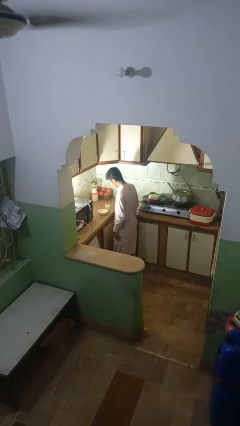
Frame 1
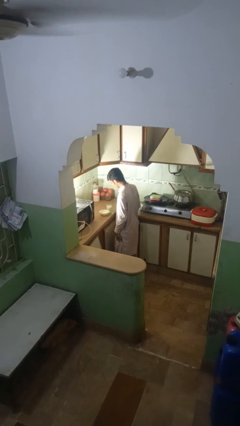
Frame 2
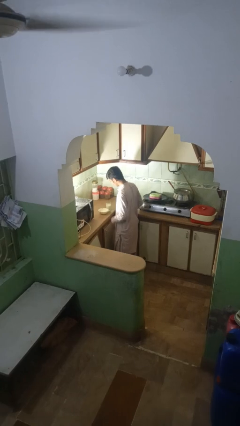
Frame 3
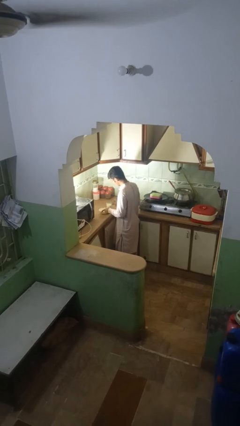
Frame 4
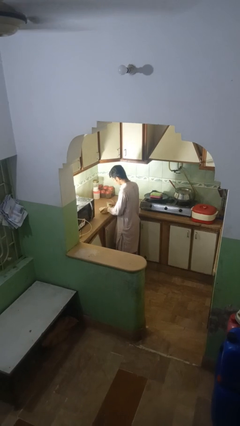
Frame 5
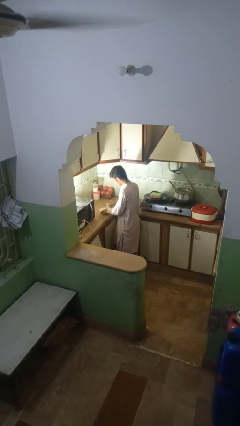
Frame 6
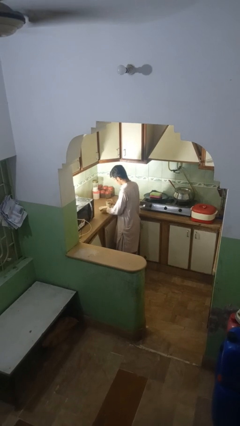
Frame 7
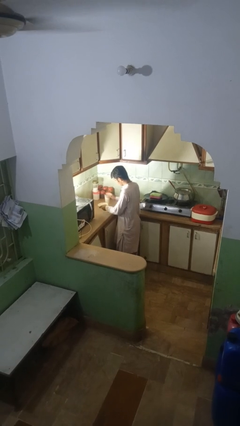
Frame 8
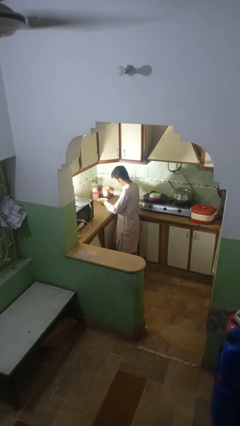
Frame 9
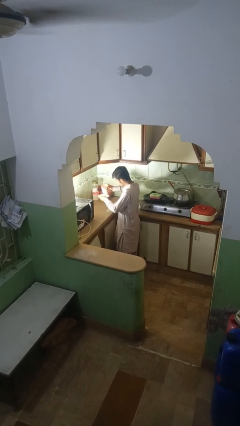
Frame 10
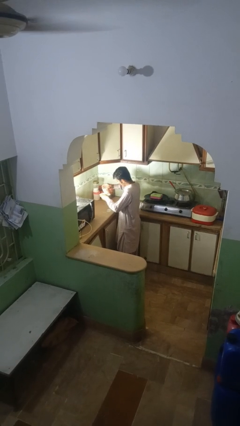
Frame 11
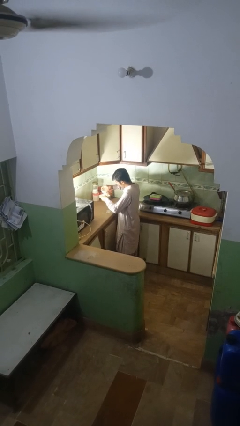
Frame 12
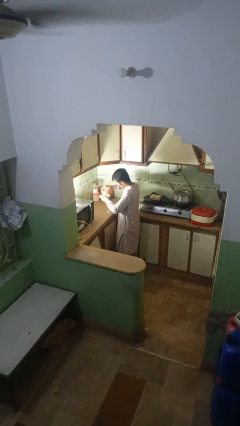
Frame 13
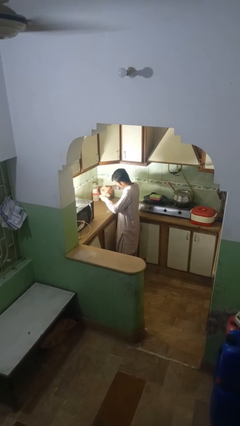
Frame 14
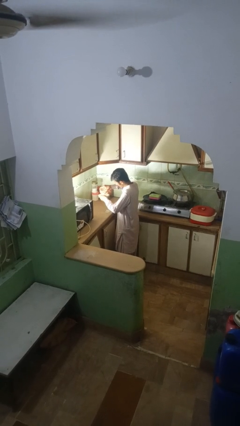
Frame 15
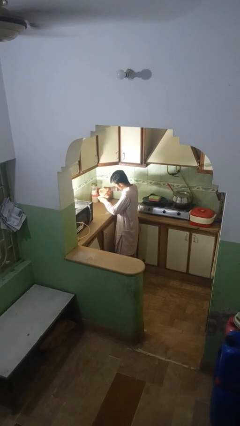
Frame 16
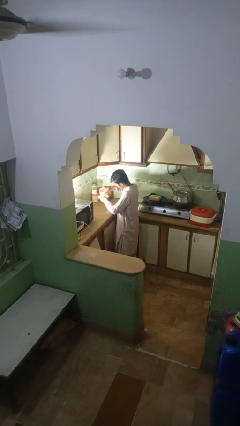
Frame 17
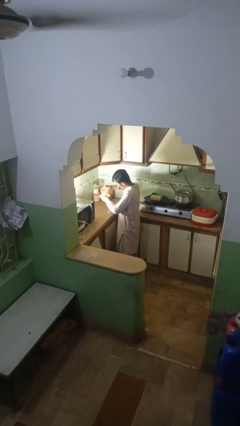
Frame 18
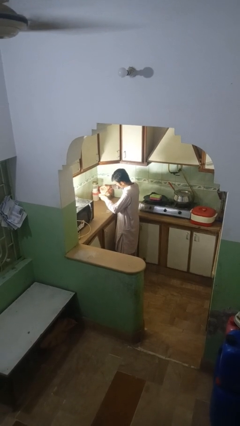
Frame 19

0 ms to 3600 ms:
person pours into bowl

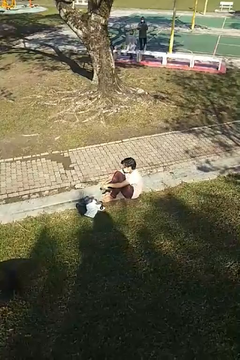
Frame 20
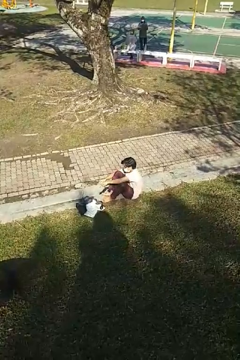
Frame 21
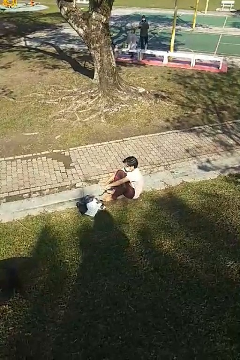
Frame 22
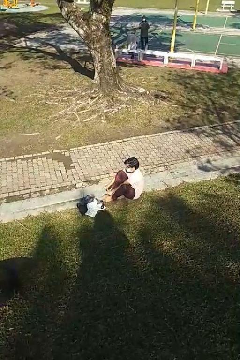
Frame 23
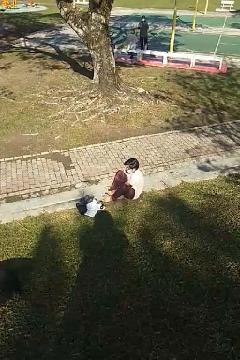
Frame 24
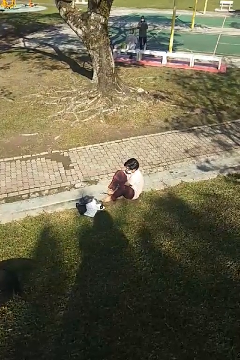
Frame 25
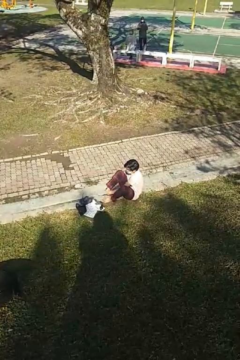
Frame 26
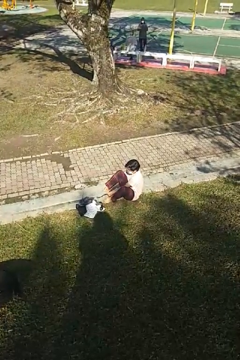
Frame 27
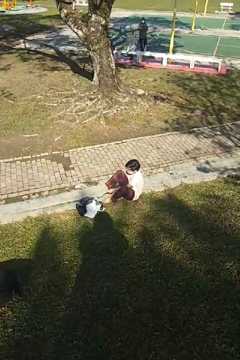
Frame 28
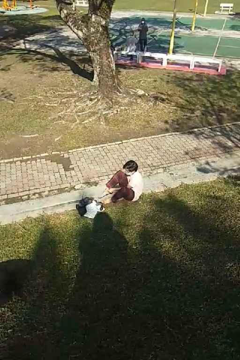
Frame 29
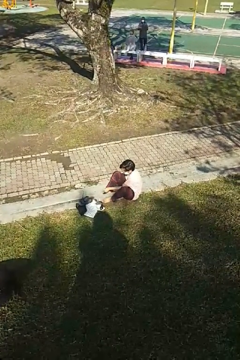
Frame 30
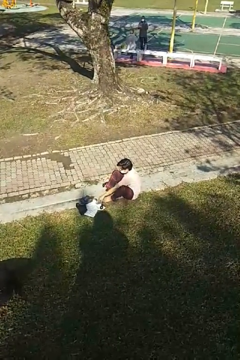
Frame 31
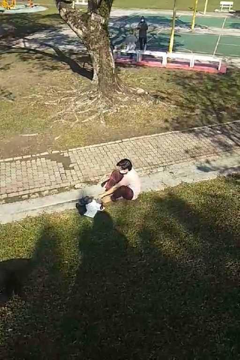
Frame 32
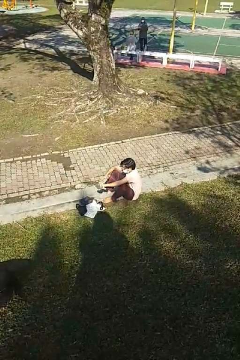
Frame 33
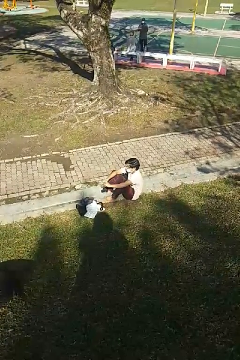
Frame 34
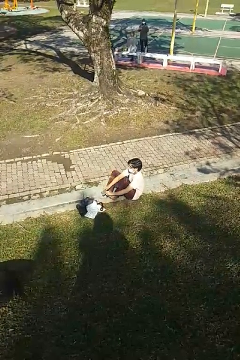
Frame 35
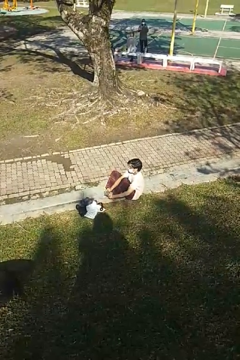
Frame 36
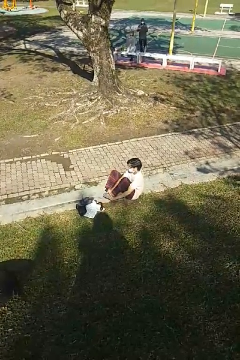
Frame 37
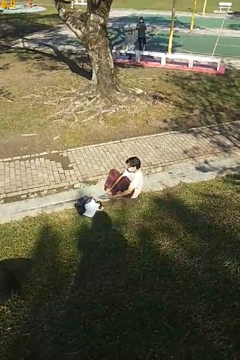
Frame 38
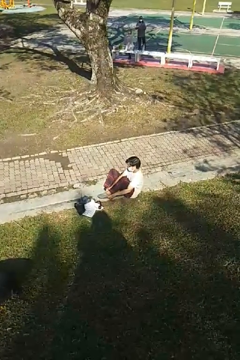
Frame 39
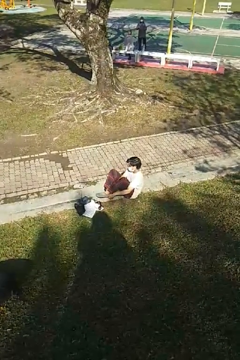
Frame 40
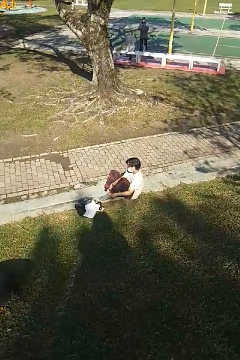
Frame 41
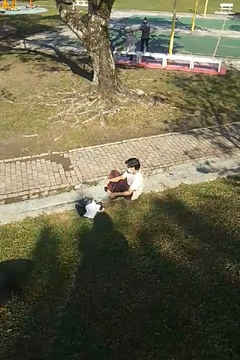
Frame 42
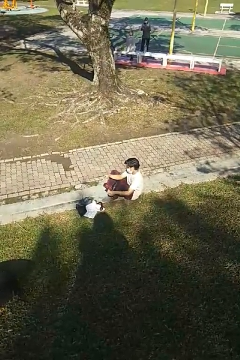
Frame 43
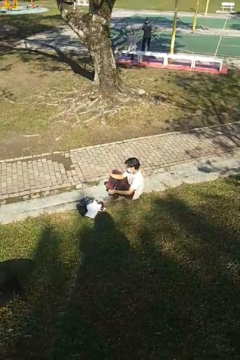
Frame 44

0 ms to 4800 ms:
person puts on socks

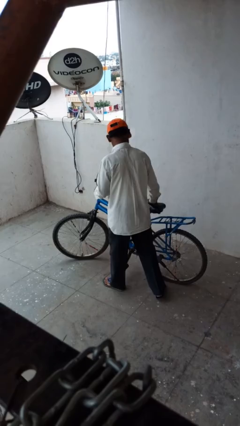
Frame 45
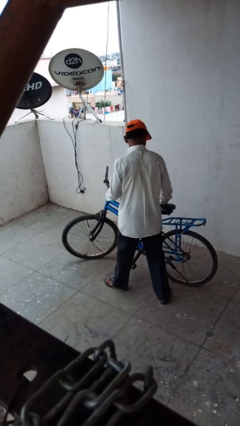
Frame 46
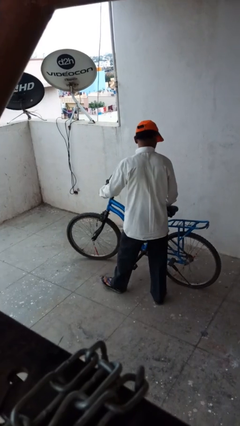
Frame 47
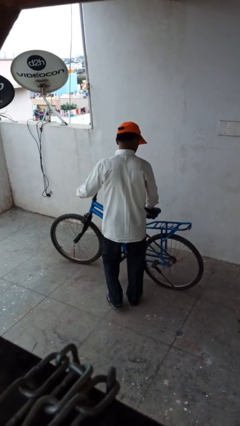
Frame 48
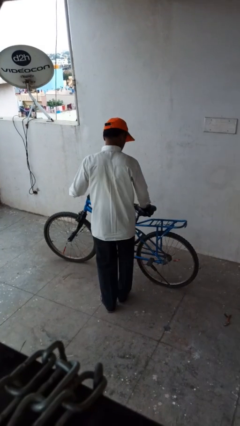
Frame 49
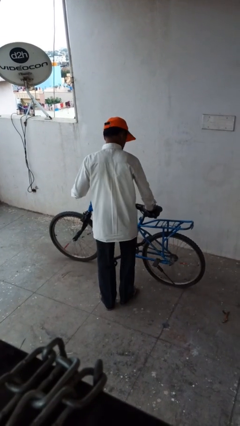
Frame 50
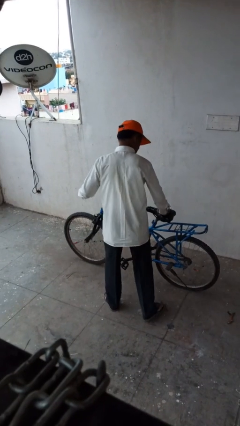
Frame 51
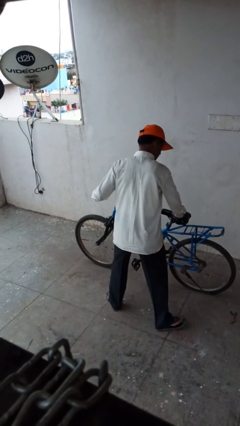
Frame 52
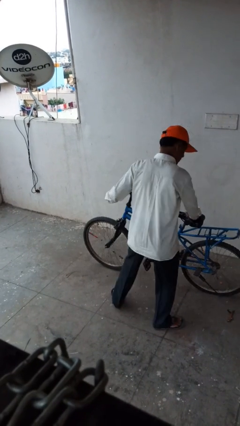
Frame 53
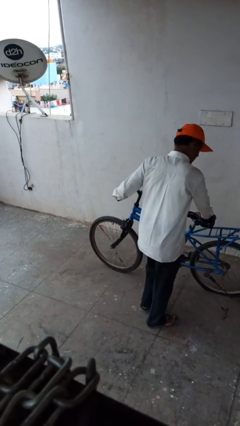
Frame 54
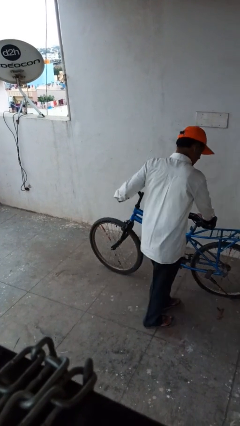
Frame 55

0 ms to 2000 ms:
person carries bicycle

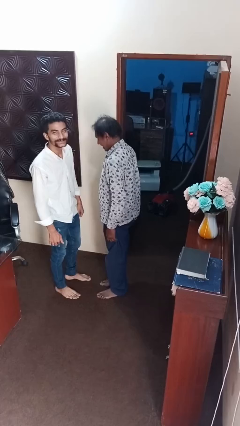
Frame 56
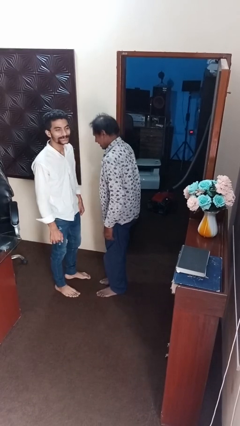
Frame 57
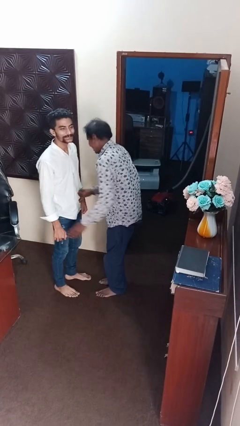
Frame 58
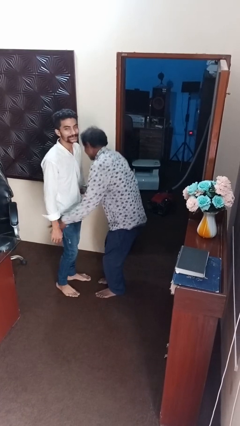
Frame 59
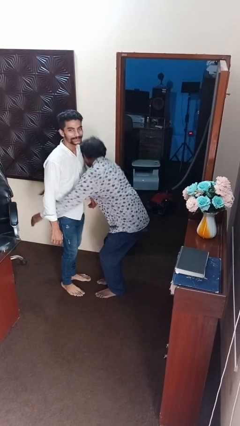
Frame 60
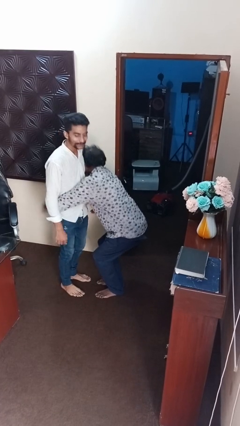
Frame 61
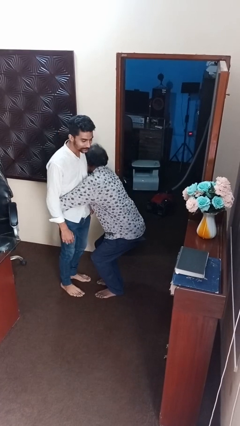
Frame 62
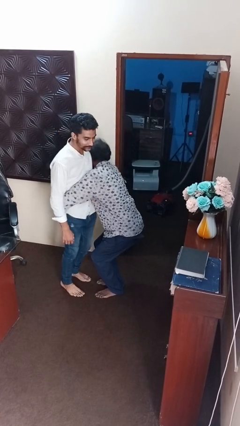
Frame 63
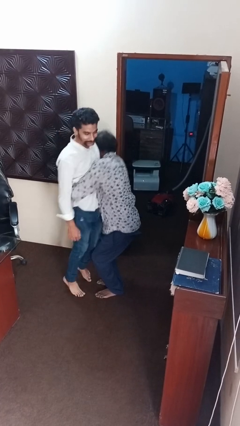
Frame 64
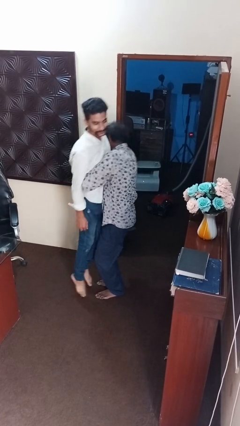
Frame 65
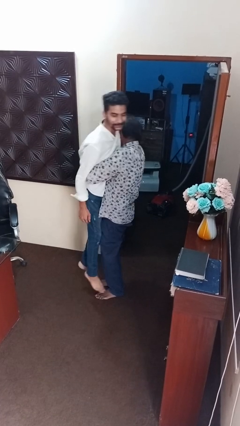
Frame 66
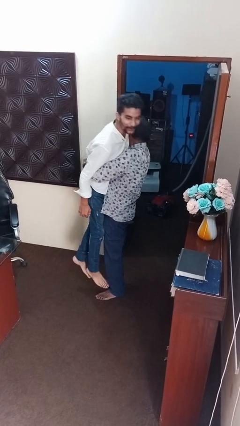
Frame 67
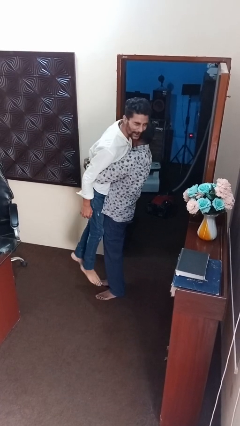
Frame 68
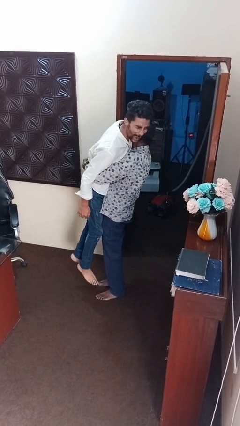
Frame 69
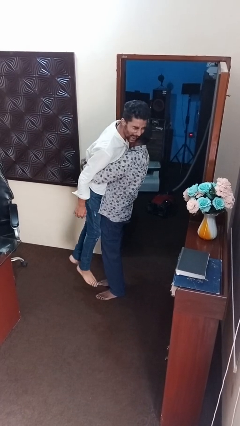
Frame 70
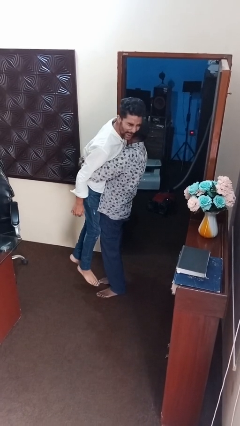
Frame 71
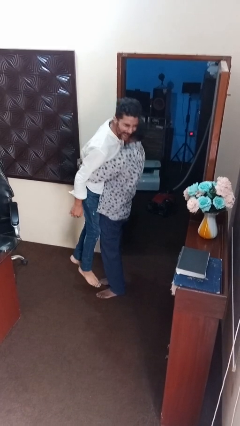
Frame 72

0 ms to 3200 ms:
person picks up person

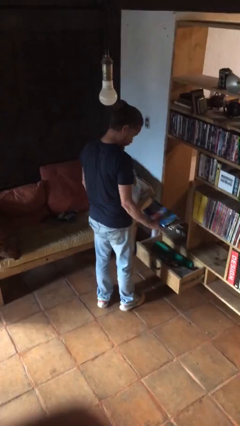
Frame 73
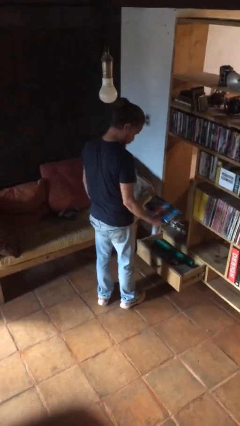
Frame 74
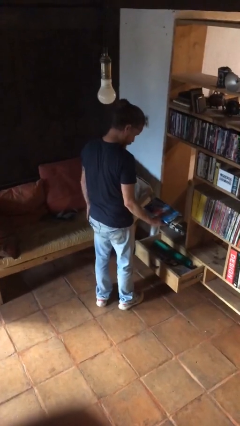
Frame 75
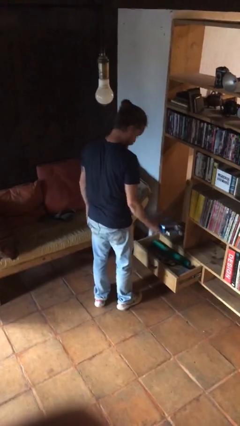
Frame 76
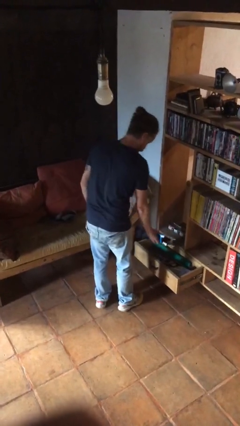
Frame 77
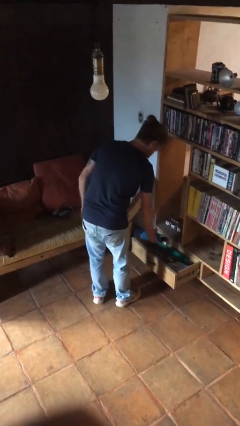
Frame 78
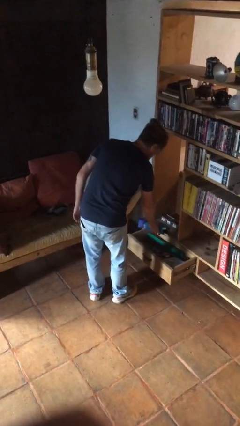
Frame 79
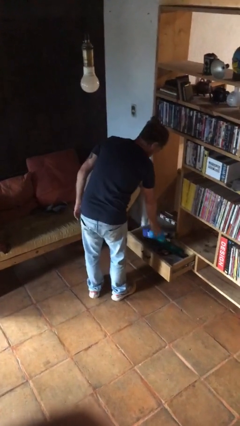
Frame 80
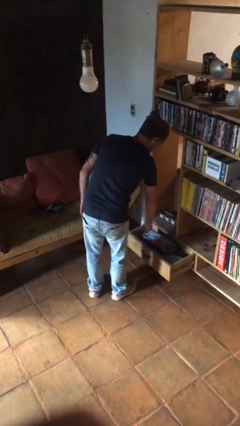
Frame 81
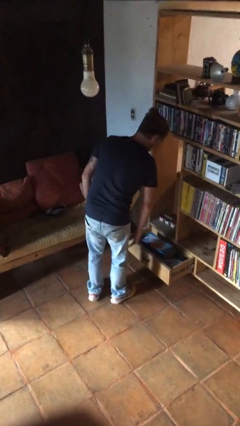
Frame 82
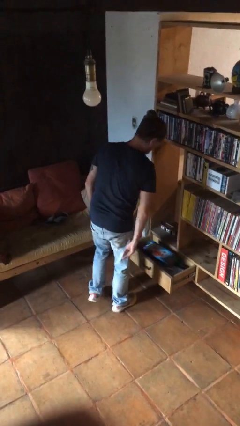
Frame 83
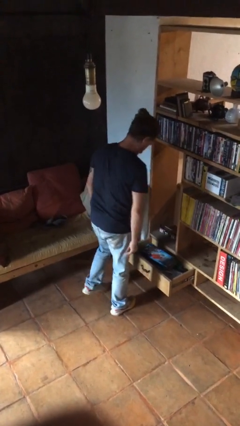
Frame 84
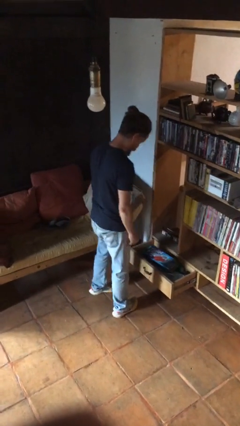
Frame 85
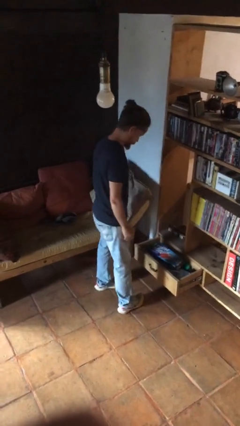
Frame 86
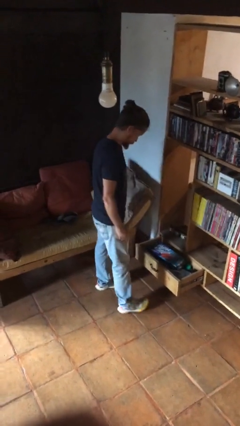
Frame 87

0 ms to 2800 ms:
person puts down object into cabinet

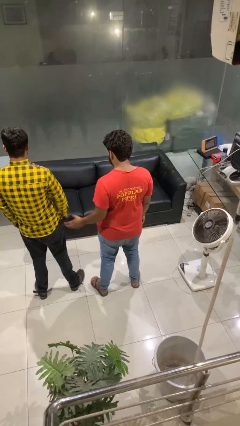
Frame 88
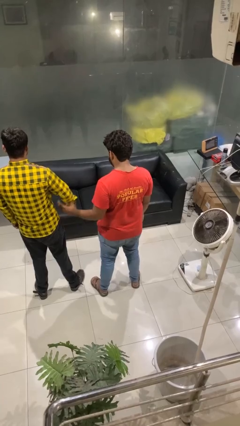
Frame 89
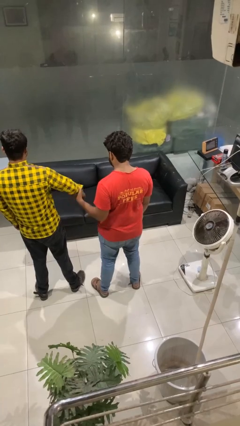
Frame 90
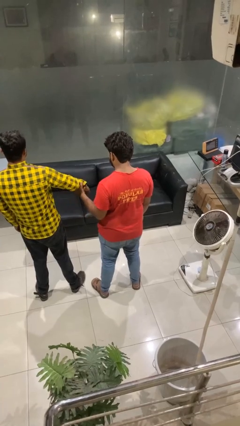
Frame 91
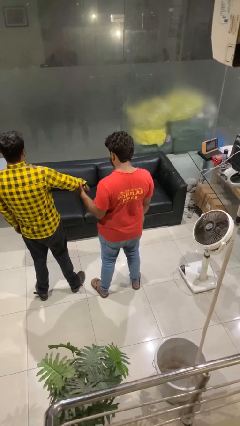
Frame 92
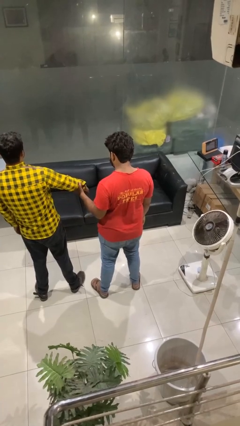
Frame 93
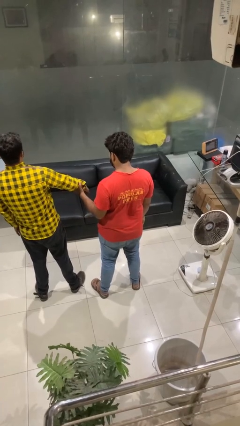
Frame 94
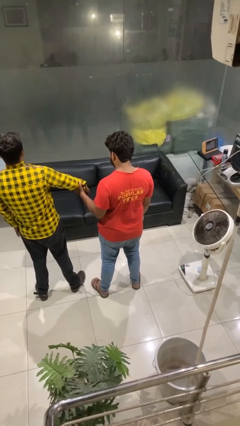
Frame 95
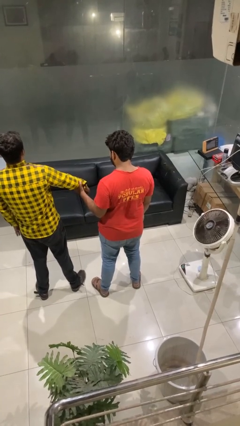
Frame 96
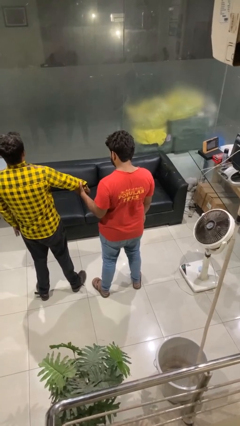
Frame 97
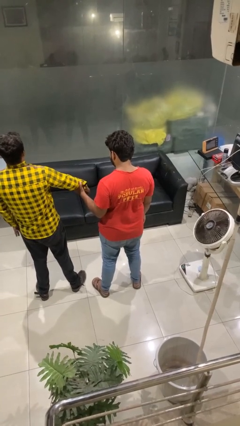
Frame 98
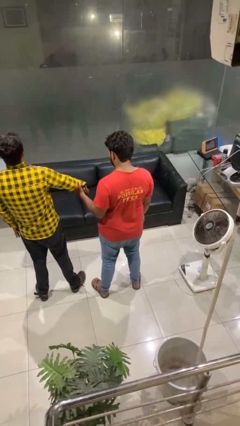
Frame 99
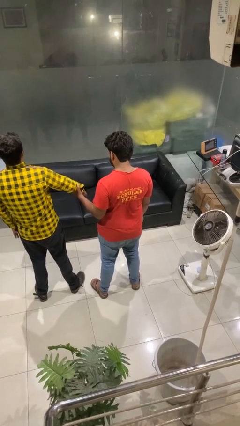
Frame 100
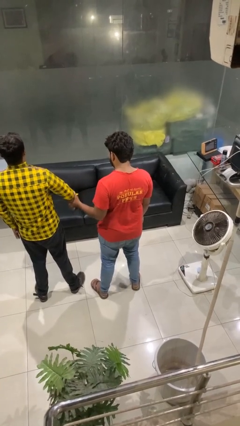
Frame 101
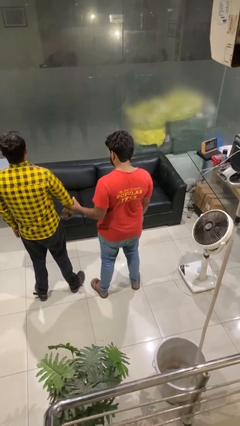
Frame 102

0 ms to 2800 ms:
person grabs person by forearm
